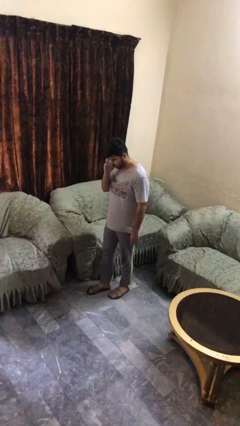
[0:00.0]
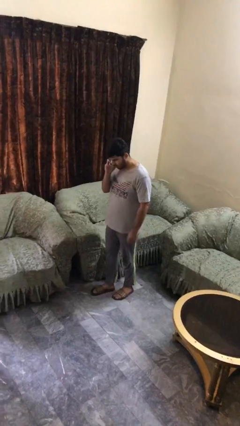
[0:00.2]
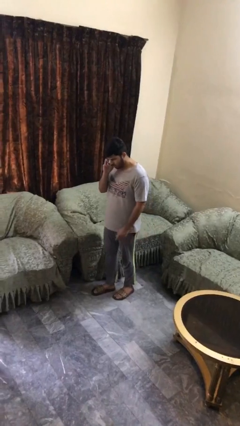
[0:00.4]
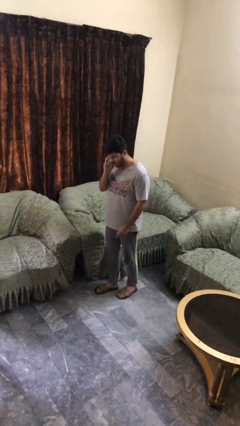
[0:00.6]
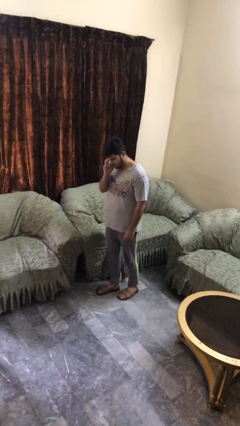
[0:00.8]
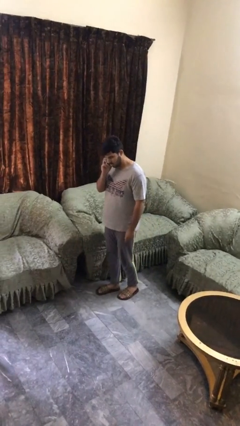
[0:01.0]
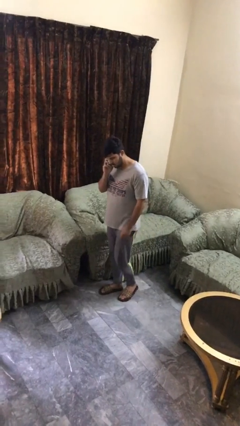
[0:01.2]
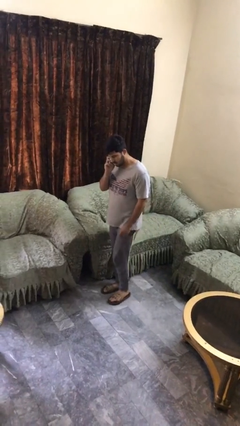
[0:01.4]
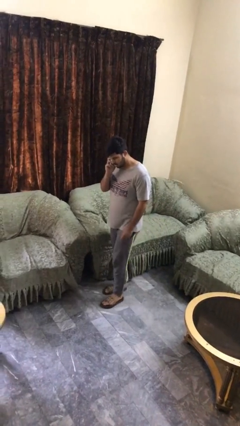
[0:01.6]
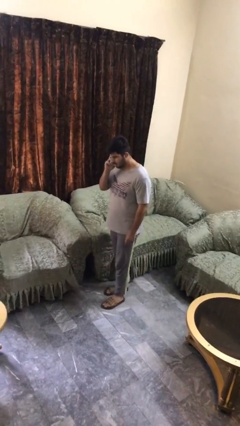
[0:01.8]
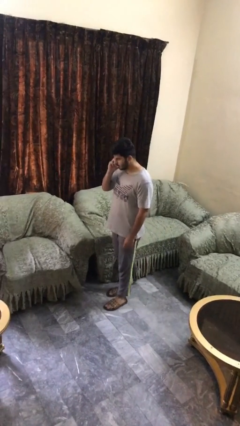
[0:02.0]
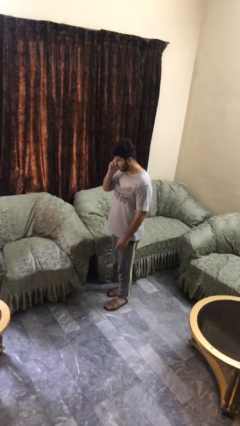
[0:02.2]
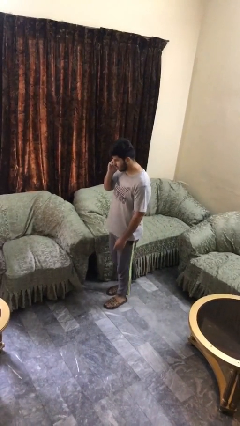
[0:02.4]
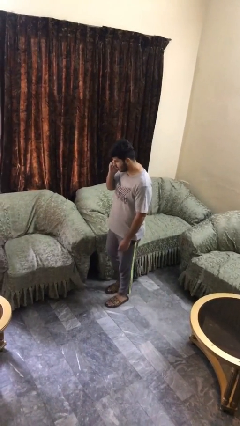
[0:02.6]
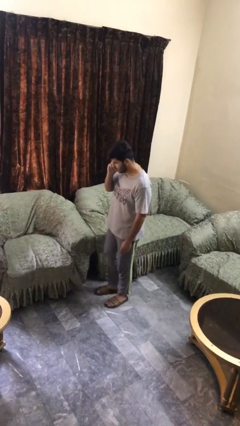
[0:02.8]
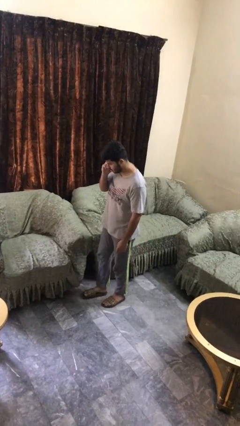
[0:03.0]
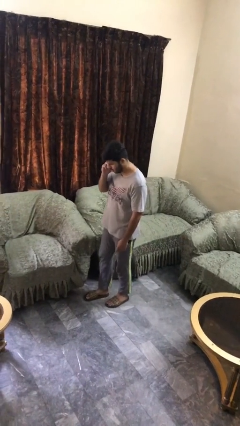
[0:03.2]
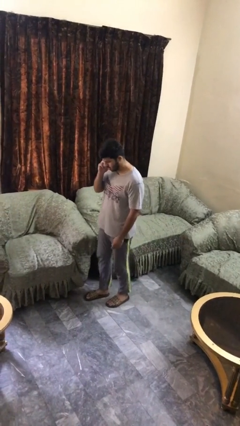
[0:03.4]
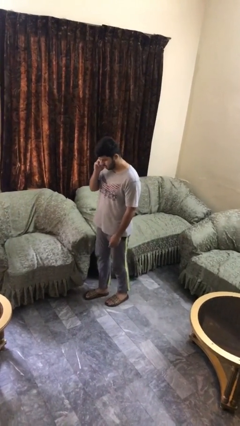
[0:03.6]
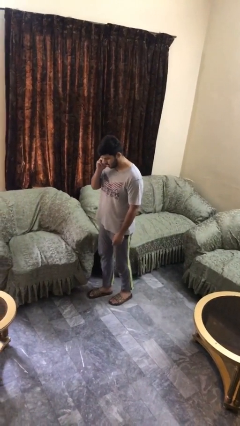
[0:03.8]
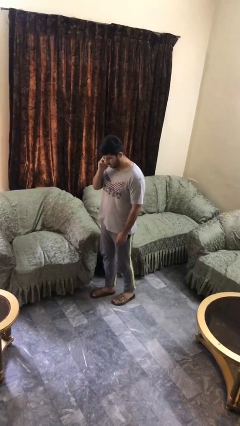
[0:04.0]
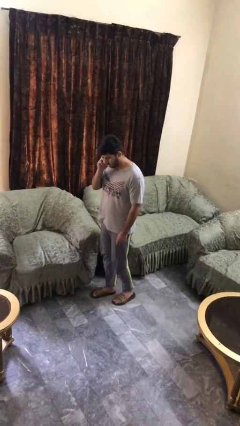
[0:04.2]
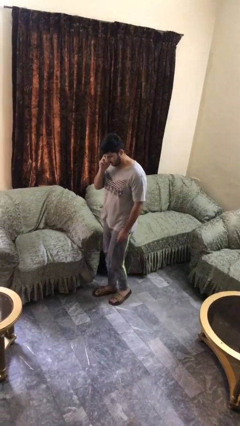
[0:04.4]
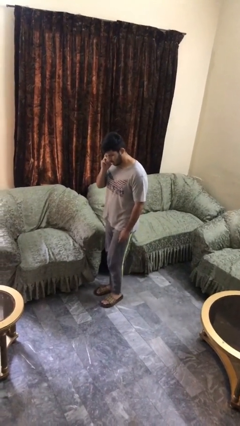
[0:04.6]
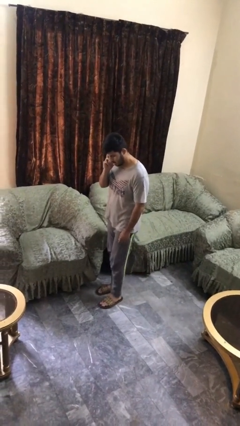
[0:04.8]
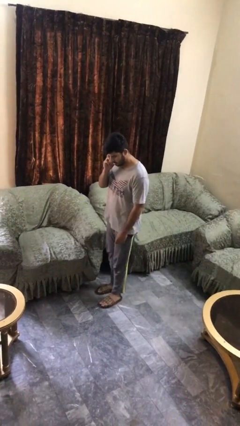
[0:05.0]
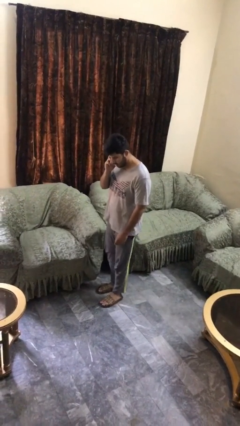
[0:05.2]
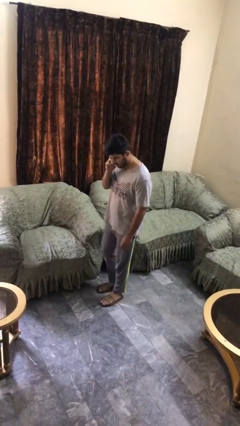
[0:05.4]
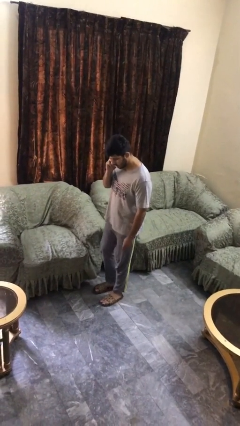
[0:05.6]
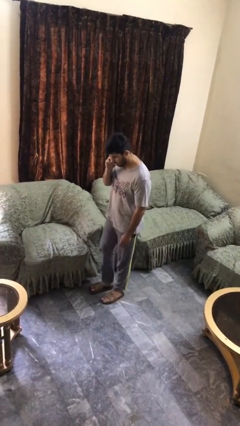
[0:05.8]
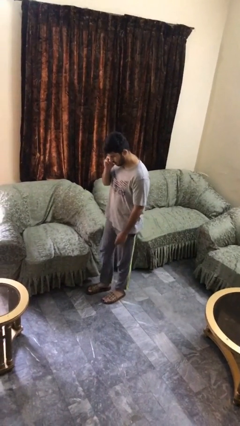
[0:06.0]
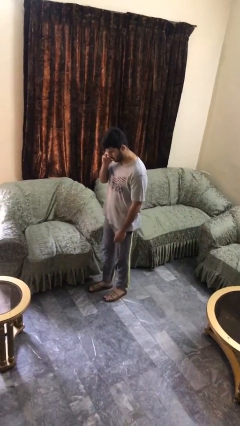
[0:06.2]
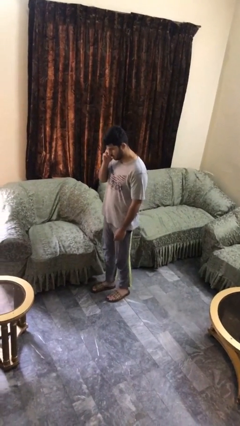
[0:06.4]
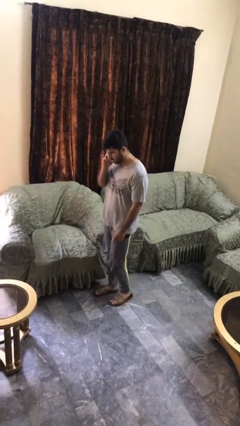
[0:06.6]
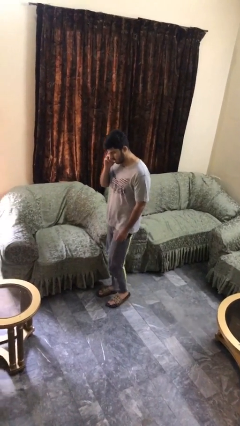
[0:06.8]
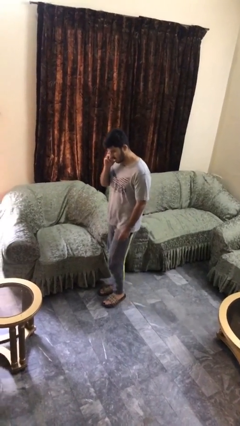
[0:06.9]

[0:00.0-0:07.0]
person talks on phone

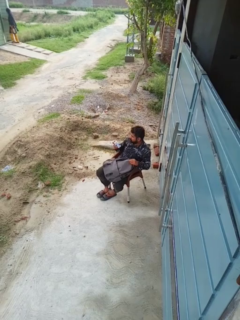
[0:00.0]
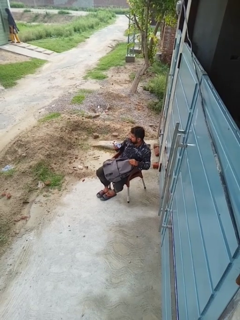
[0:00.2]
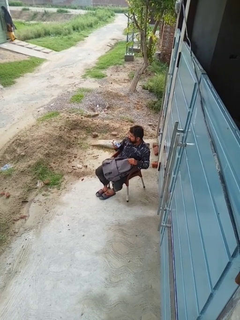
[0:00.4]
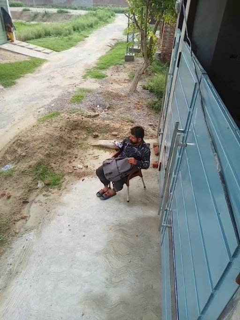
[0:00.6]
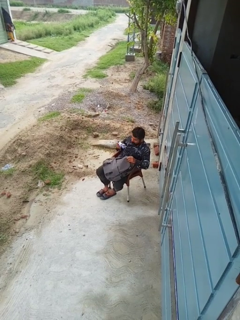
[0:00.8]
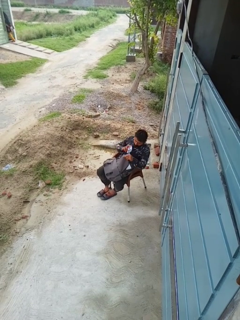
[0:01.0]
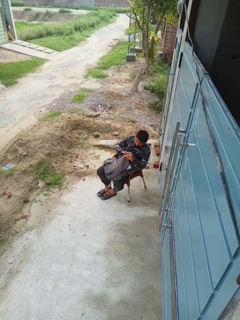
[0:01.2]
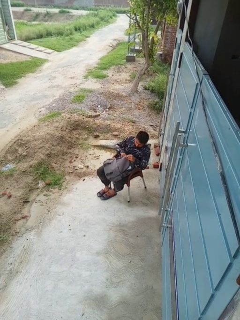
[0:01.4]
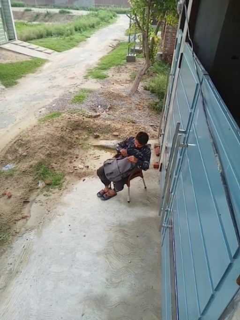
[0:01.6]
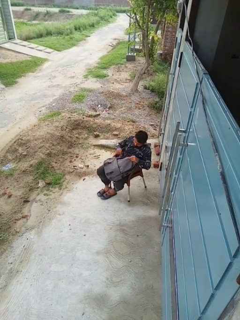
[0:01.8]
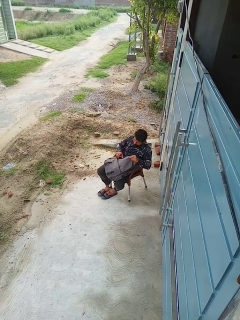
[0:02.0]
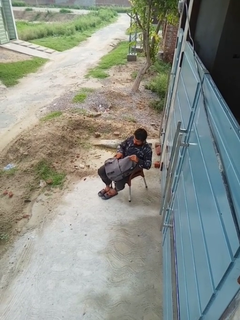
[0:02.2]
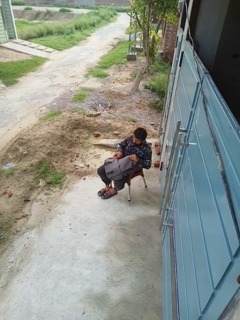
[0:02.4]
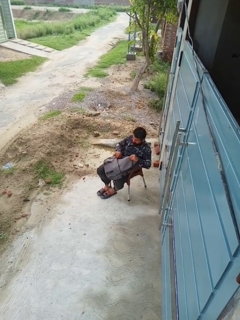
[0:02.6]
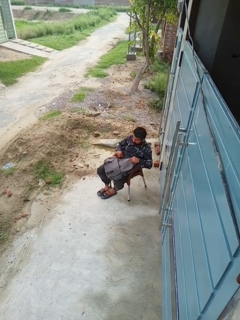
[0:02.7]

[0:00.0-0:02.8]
person puts object into backpack

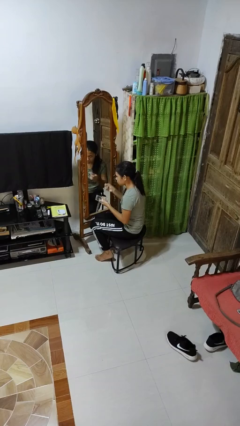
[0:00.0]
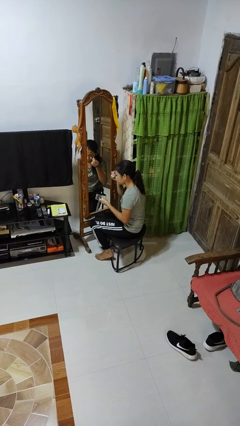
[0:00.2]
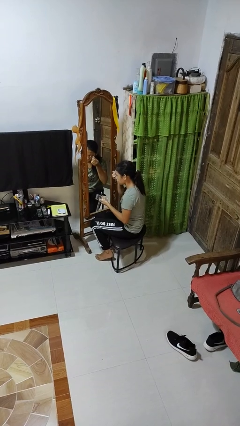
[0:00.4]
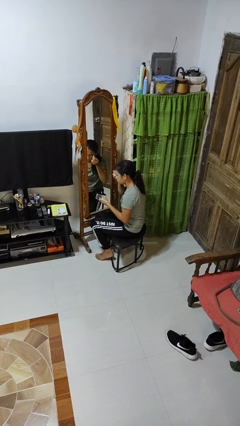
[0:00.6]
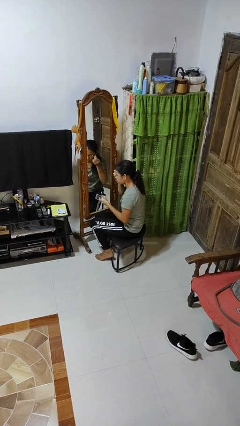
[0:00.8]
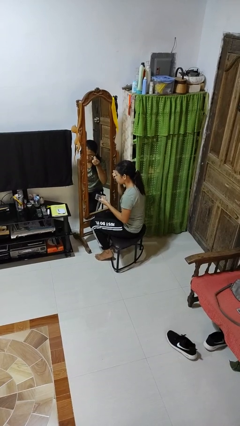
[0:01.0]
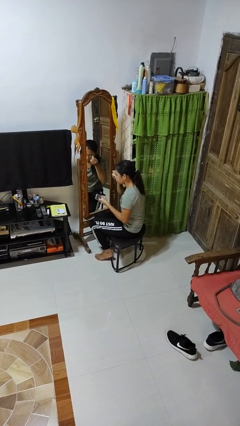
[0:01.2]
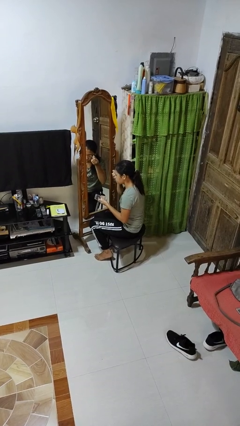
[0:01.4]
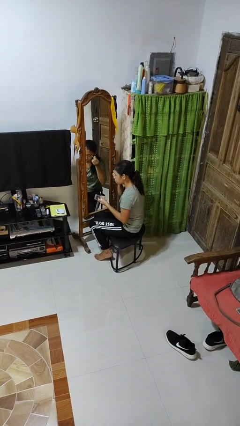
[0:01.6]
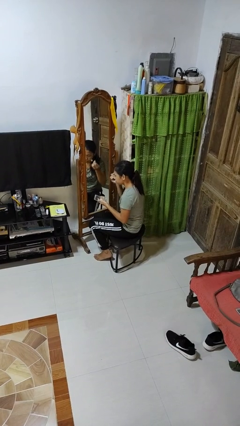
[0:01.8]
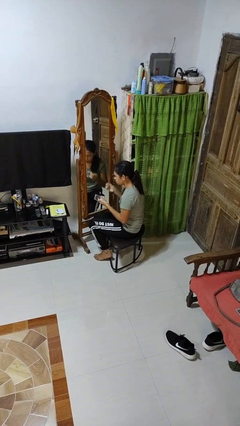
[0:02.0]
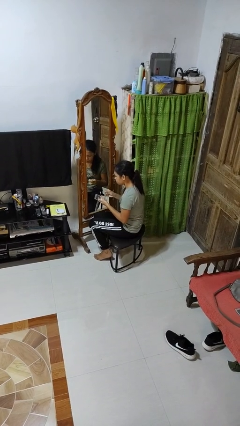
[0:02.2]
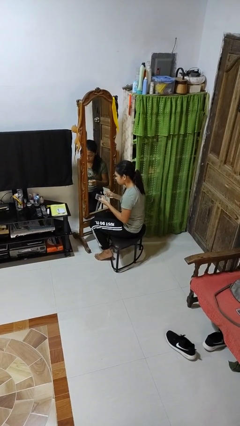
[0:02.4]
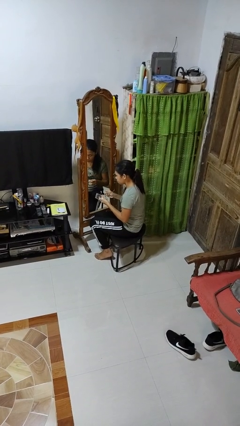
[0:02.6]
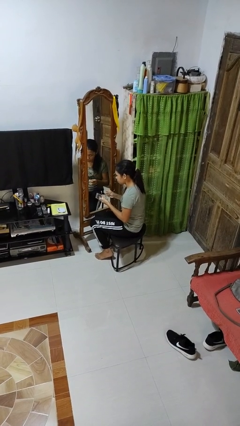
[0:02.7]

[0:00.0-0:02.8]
person applies eye makeup

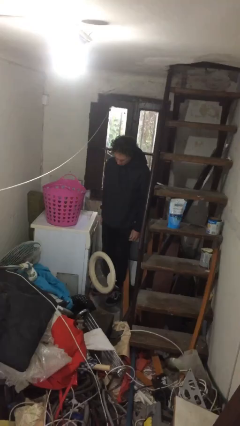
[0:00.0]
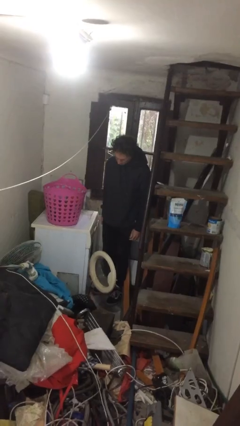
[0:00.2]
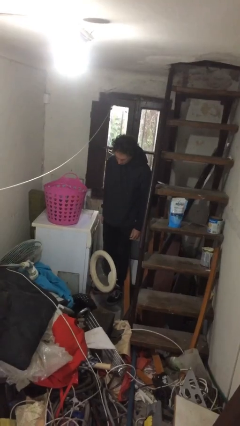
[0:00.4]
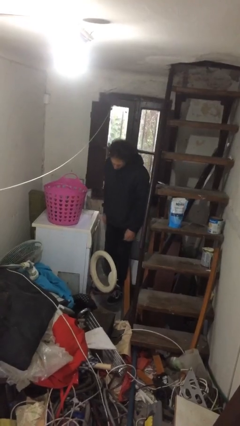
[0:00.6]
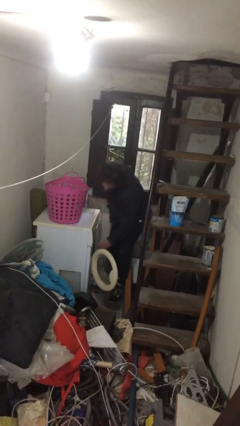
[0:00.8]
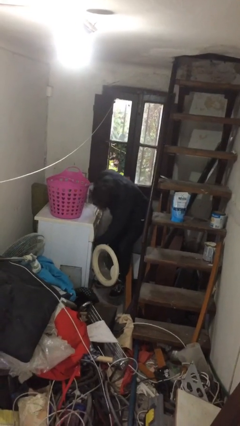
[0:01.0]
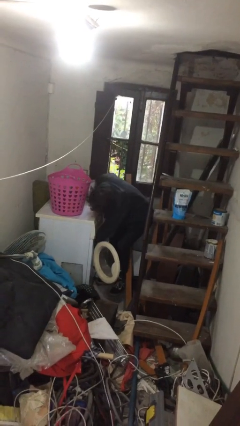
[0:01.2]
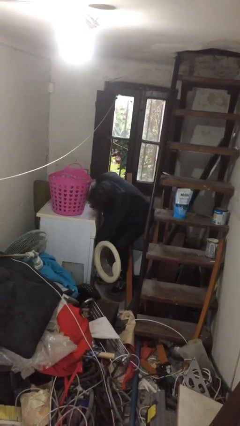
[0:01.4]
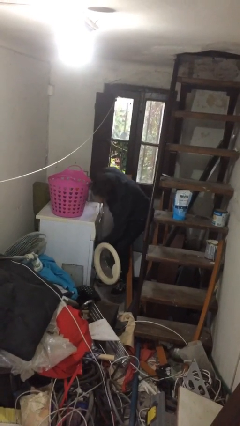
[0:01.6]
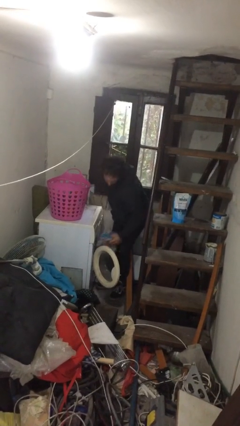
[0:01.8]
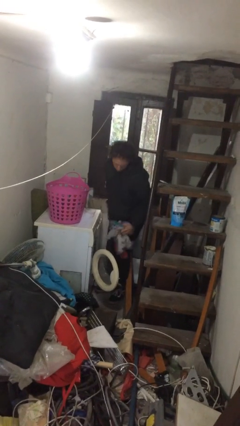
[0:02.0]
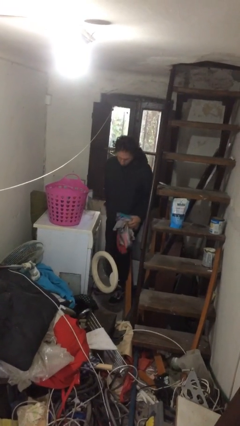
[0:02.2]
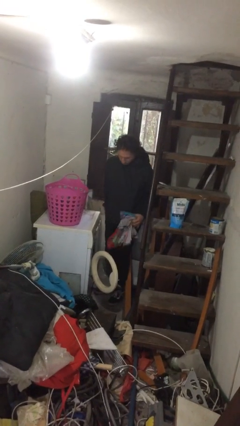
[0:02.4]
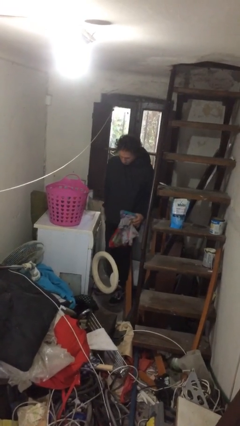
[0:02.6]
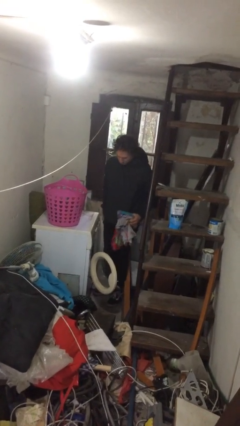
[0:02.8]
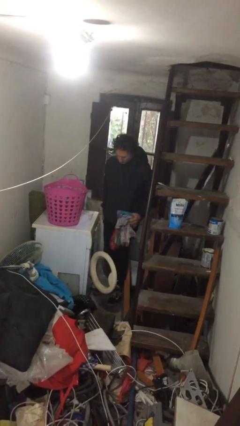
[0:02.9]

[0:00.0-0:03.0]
person unloads clotheswasher

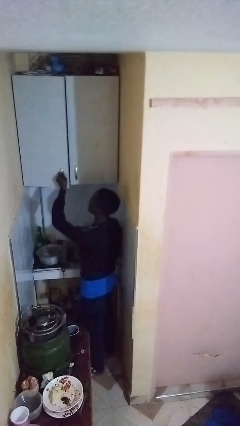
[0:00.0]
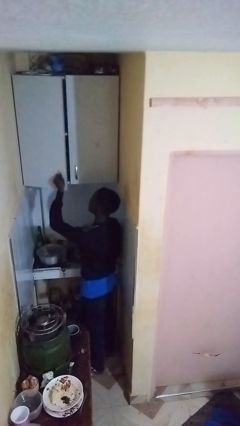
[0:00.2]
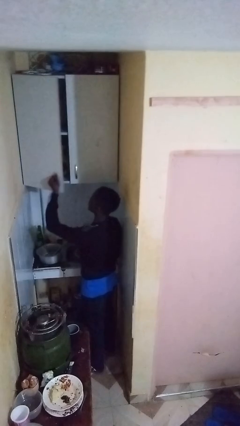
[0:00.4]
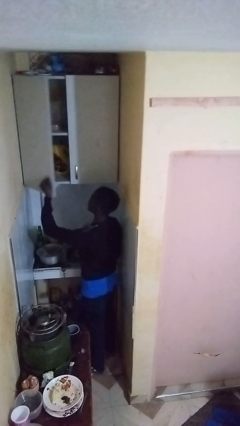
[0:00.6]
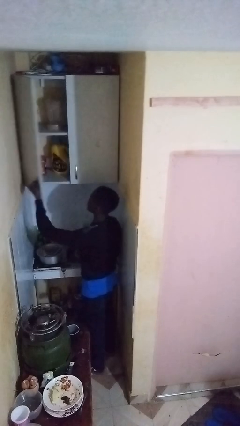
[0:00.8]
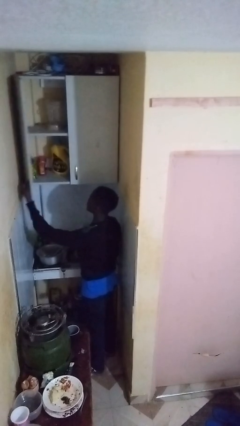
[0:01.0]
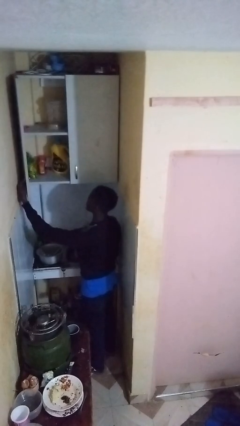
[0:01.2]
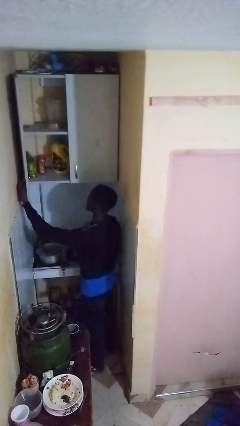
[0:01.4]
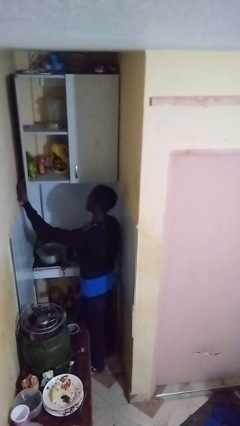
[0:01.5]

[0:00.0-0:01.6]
person opens kitchen drawer

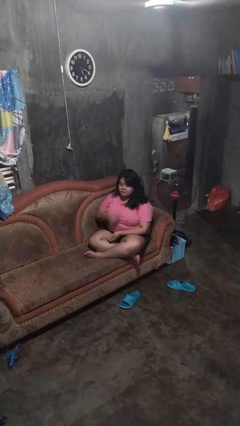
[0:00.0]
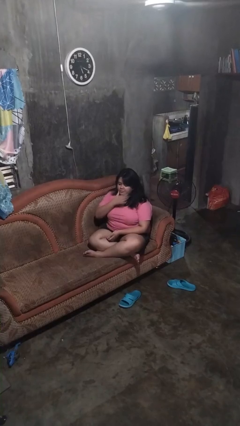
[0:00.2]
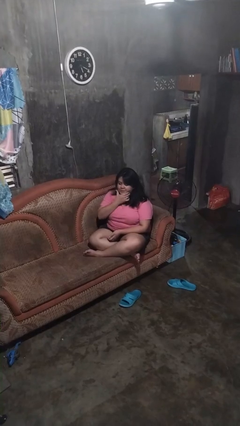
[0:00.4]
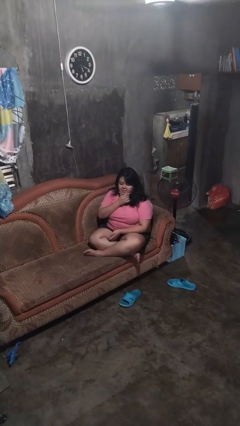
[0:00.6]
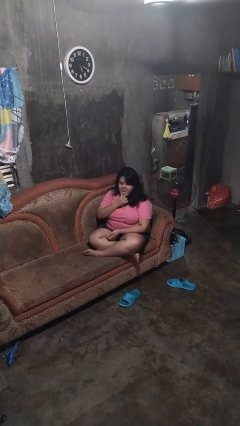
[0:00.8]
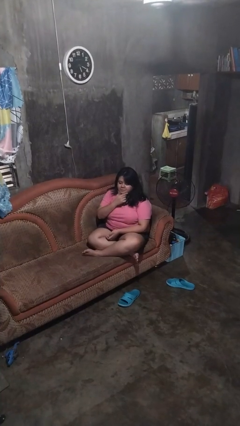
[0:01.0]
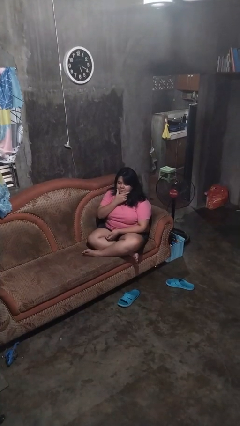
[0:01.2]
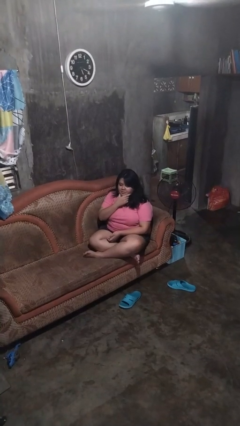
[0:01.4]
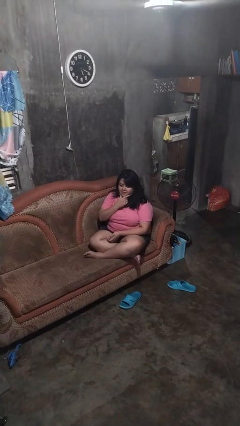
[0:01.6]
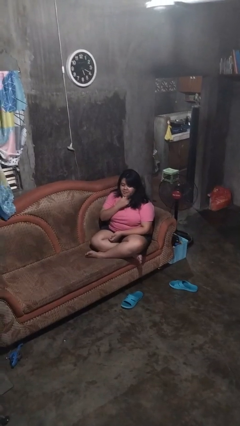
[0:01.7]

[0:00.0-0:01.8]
person strokes chin
